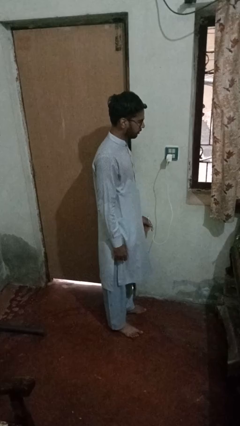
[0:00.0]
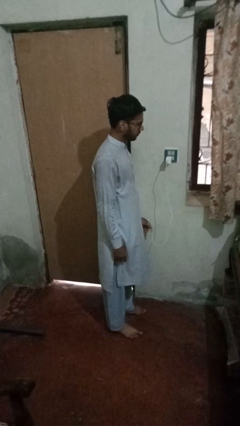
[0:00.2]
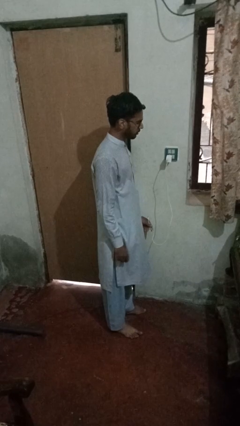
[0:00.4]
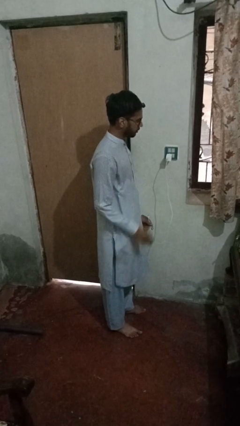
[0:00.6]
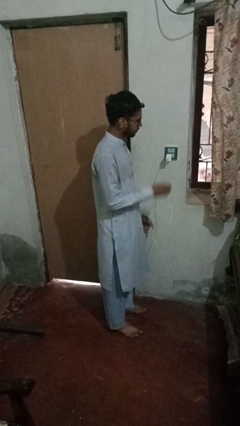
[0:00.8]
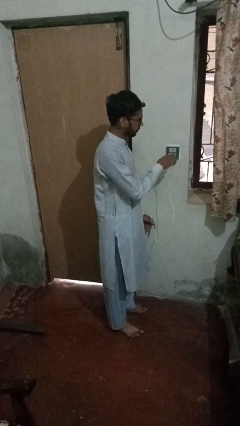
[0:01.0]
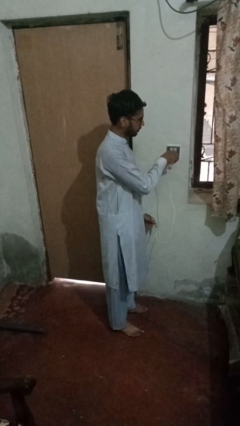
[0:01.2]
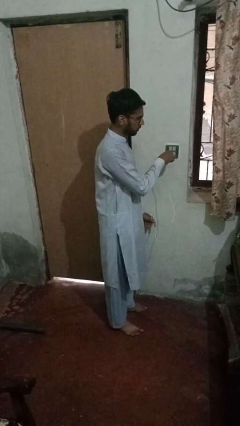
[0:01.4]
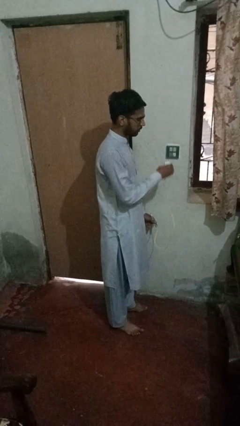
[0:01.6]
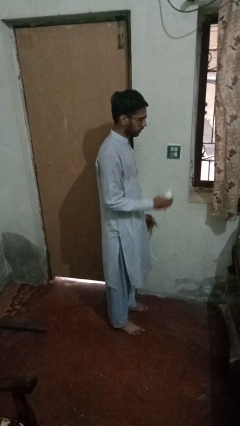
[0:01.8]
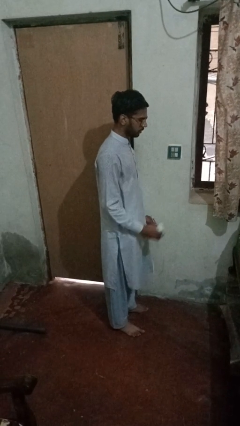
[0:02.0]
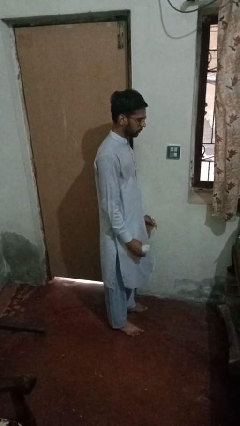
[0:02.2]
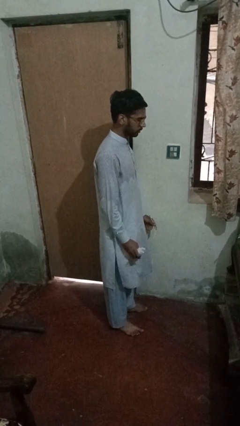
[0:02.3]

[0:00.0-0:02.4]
person unplugs from electrical socket

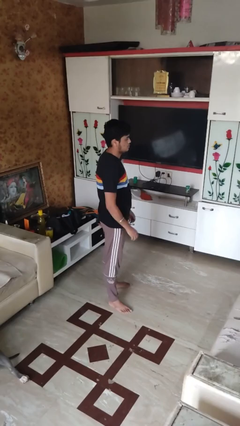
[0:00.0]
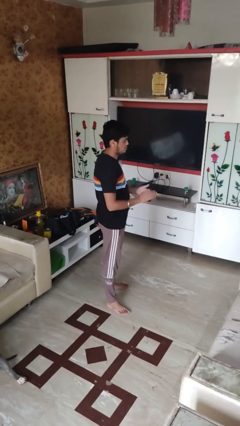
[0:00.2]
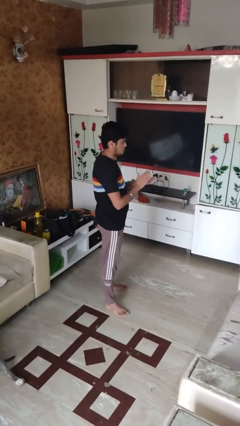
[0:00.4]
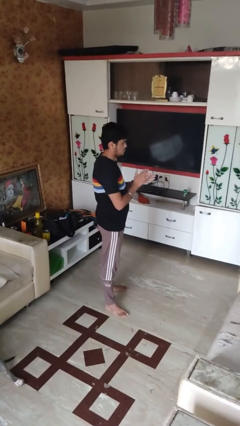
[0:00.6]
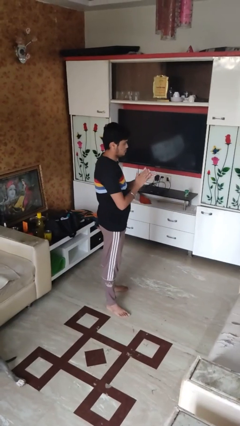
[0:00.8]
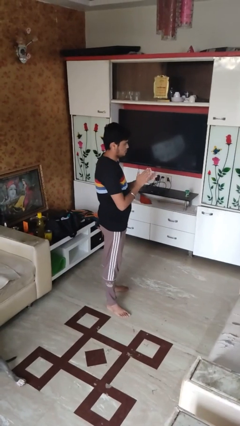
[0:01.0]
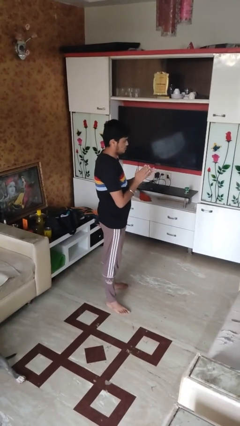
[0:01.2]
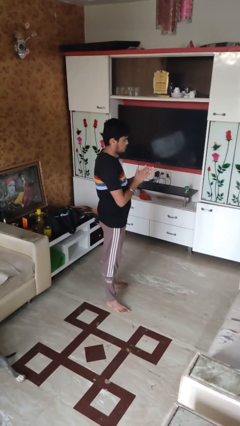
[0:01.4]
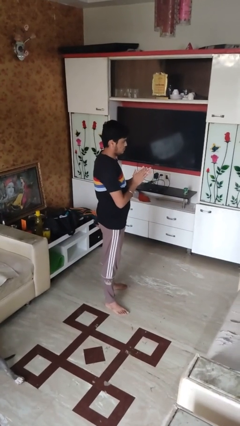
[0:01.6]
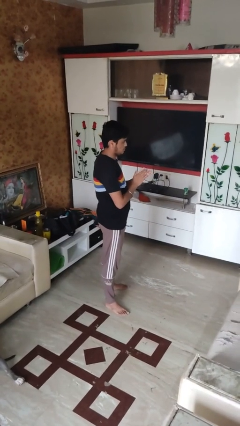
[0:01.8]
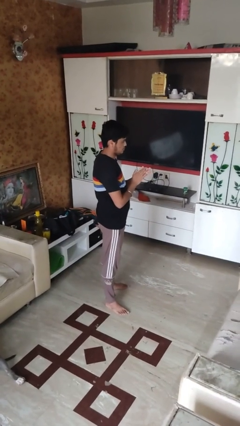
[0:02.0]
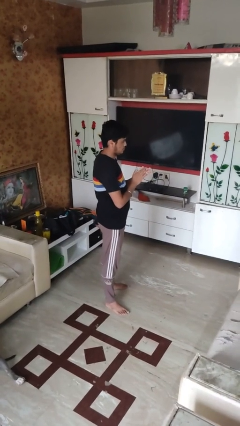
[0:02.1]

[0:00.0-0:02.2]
person claps hands

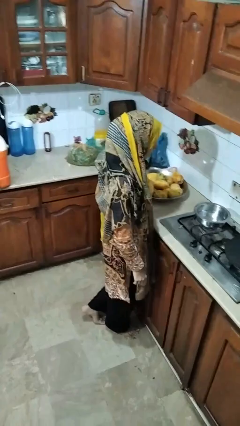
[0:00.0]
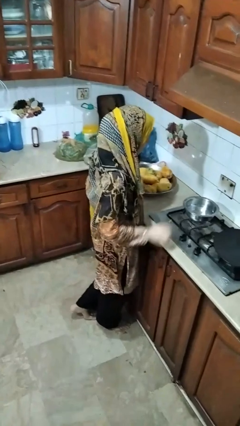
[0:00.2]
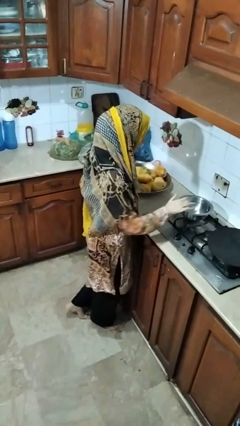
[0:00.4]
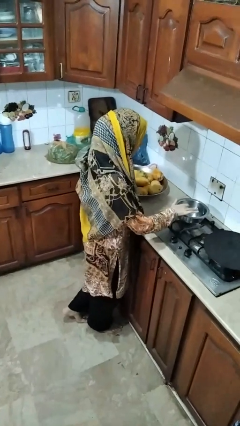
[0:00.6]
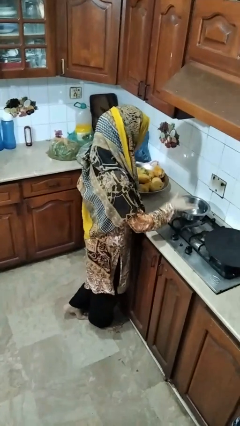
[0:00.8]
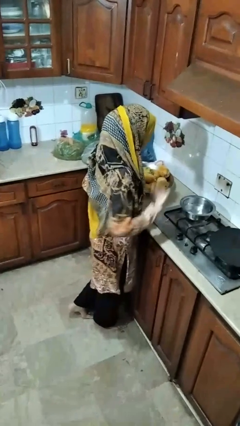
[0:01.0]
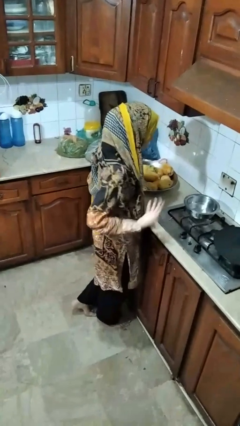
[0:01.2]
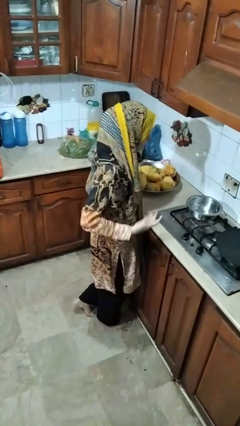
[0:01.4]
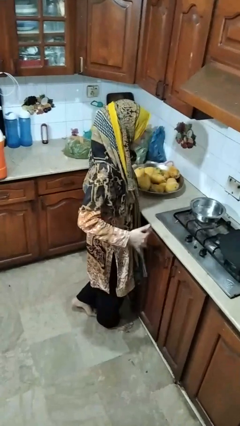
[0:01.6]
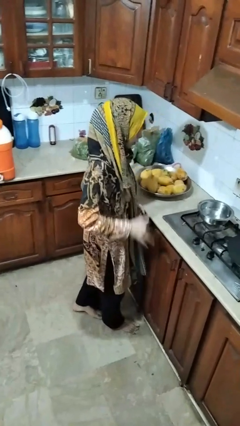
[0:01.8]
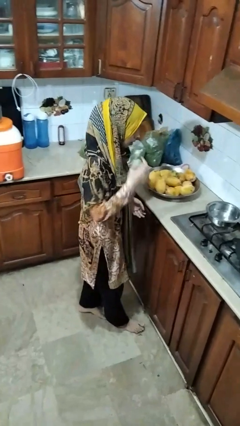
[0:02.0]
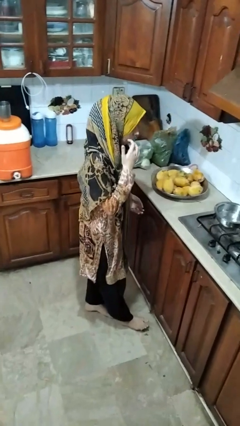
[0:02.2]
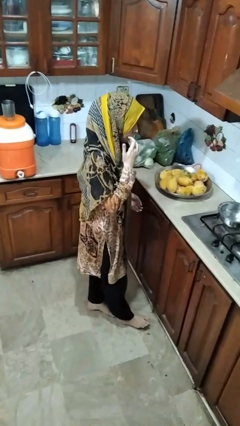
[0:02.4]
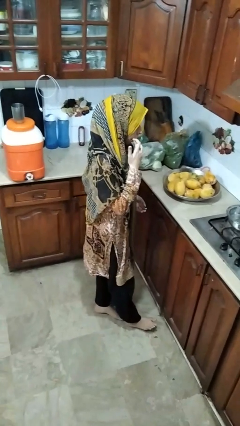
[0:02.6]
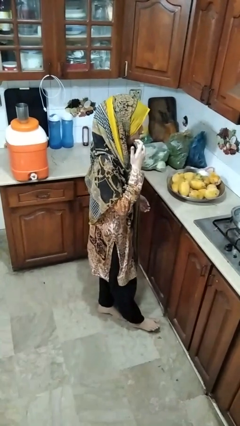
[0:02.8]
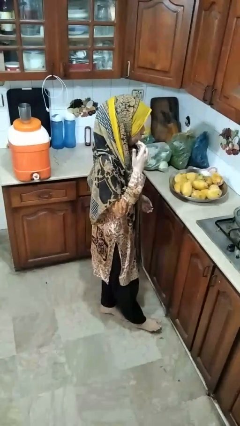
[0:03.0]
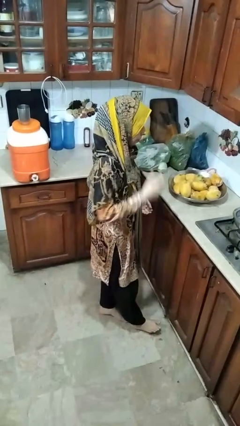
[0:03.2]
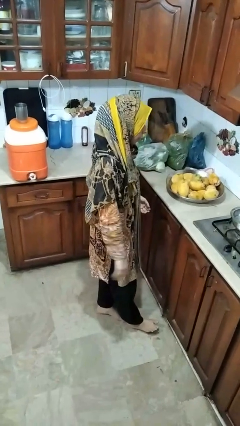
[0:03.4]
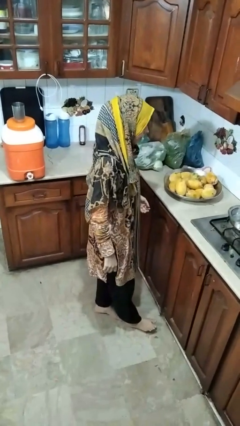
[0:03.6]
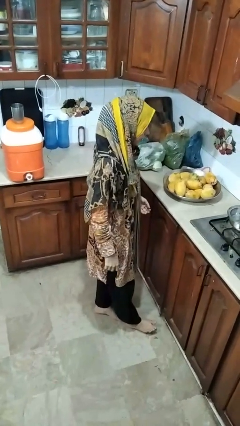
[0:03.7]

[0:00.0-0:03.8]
person burns hand

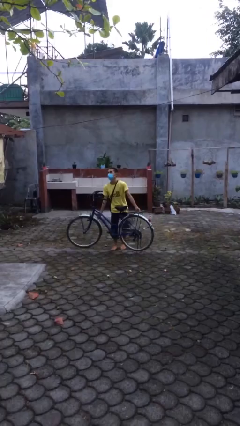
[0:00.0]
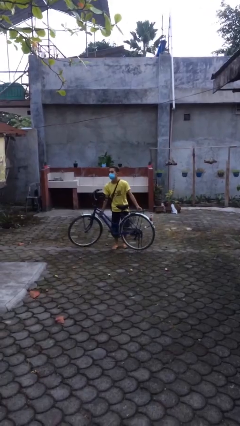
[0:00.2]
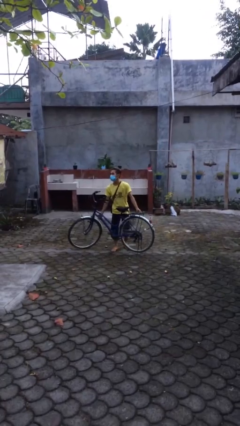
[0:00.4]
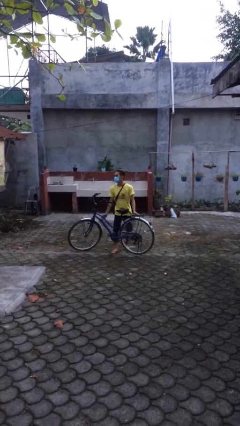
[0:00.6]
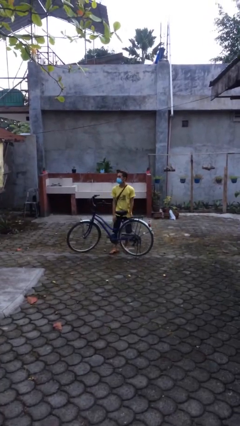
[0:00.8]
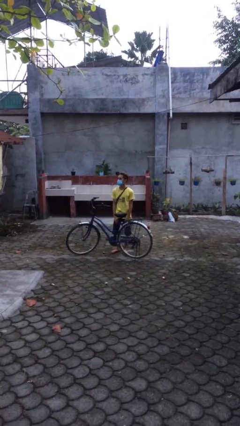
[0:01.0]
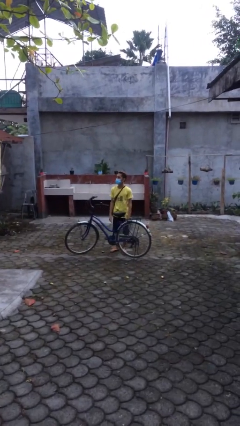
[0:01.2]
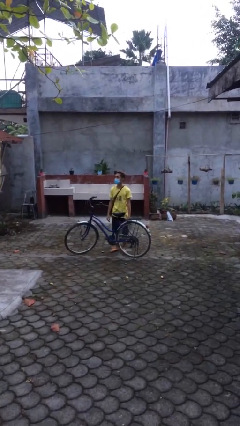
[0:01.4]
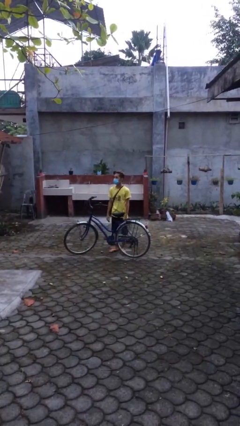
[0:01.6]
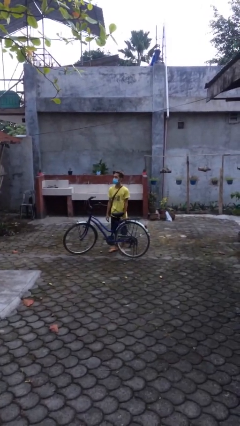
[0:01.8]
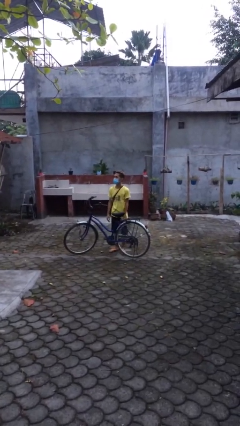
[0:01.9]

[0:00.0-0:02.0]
person puts down object on floor

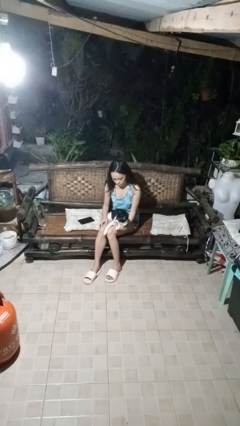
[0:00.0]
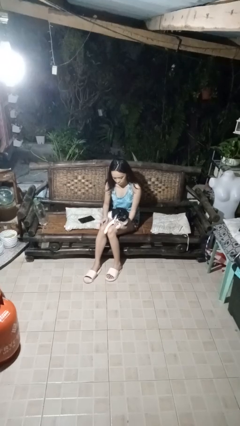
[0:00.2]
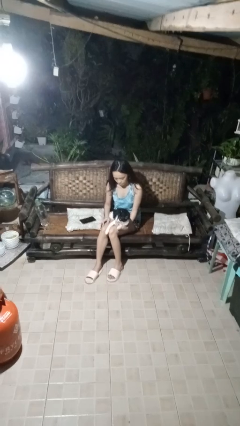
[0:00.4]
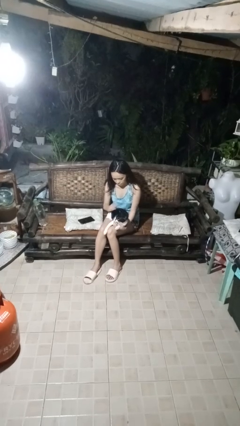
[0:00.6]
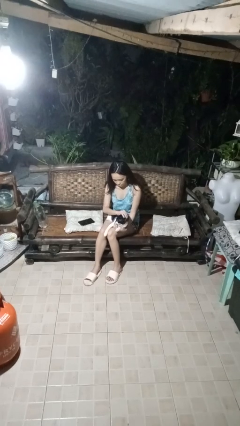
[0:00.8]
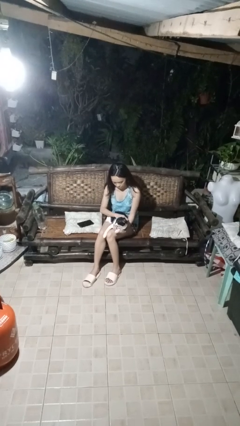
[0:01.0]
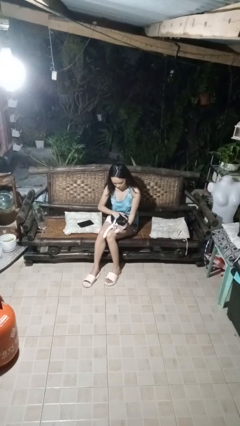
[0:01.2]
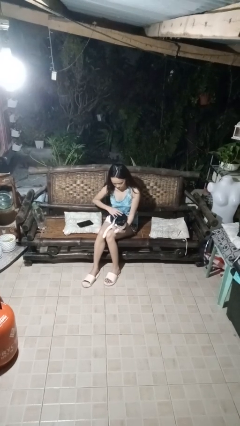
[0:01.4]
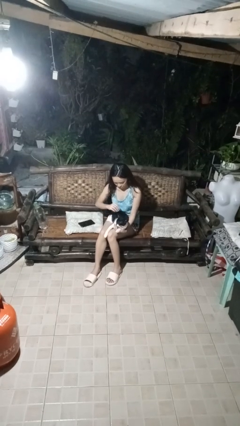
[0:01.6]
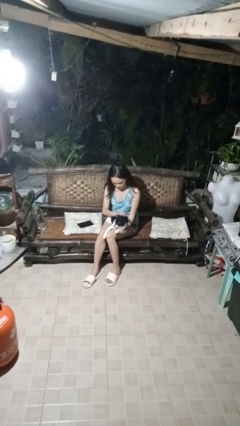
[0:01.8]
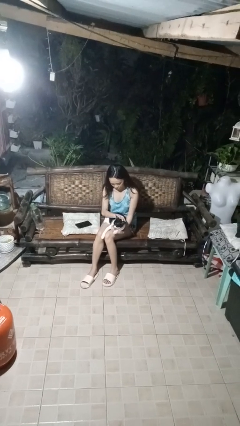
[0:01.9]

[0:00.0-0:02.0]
person pets cat

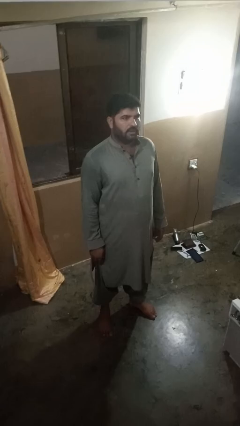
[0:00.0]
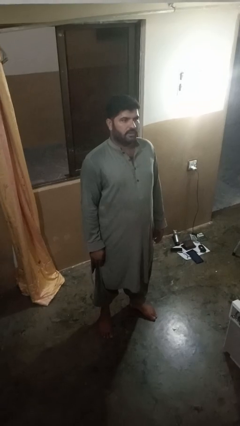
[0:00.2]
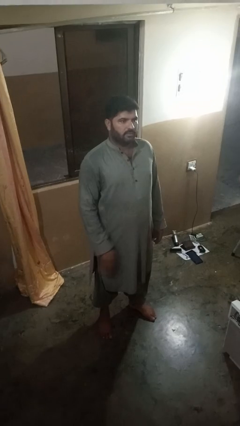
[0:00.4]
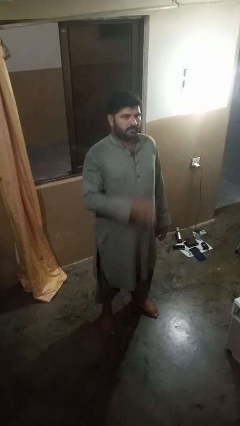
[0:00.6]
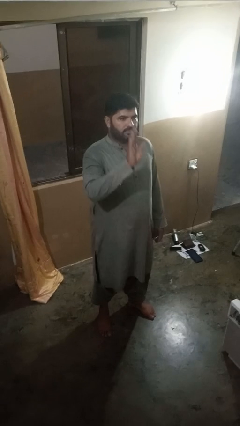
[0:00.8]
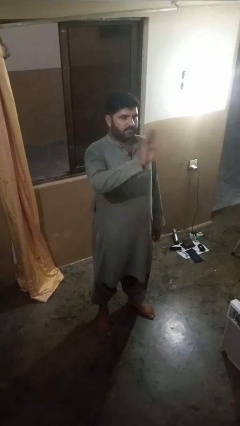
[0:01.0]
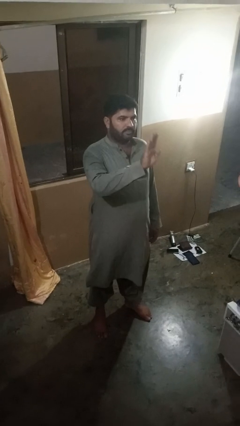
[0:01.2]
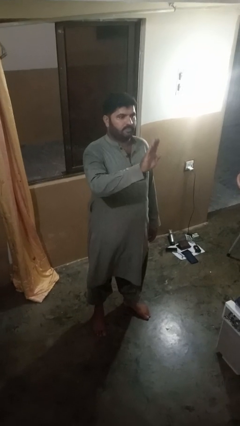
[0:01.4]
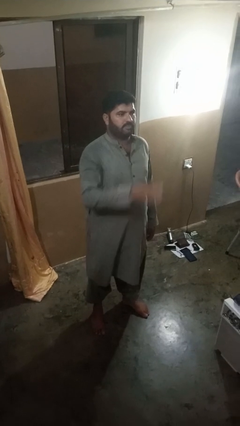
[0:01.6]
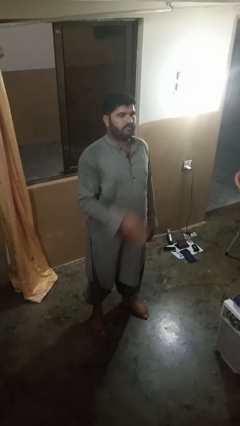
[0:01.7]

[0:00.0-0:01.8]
person gestures stop

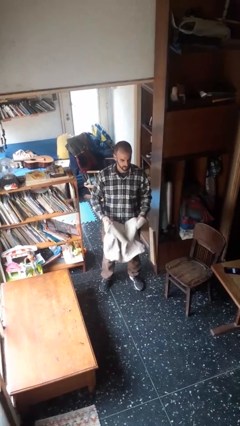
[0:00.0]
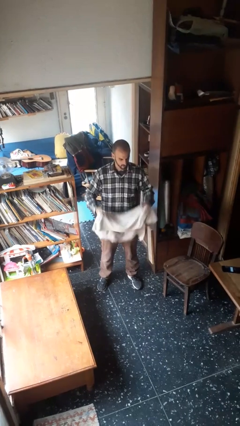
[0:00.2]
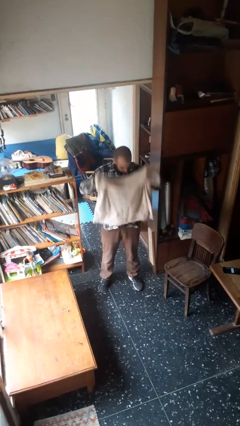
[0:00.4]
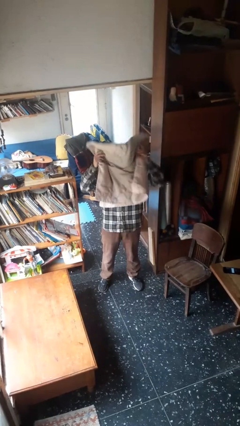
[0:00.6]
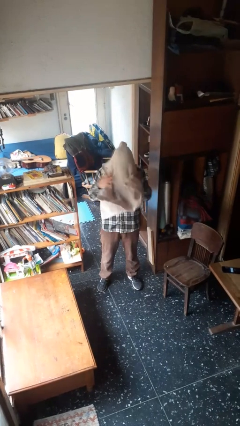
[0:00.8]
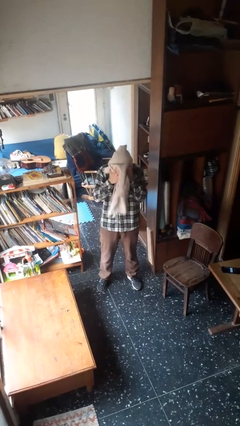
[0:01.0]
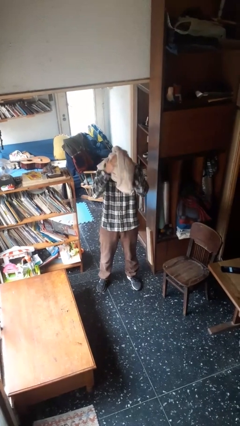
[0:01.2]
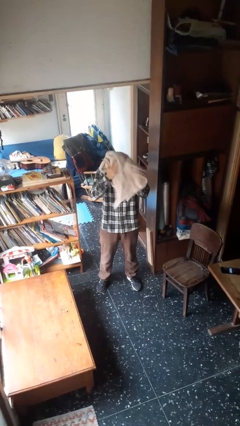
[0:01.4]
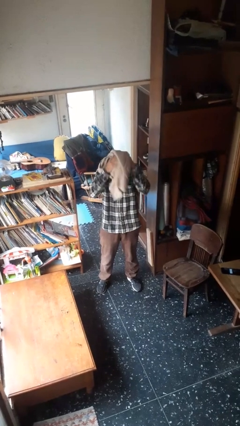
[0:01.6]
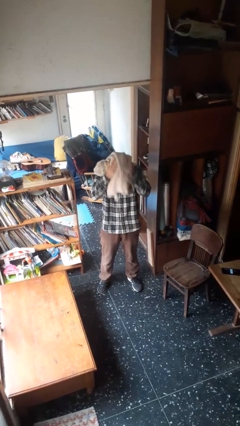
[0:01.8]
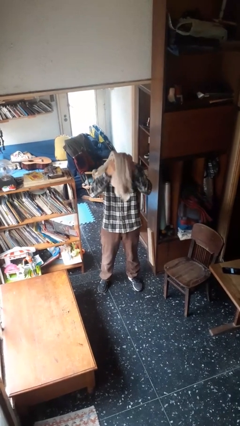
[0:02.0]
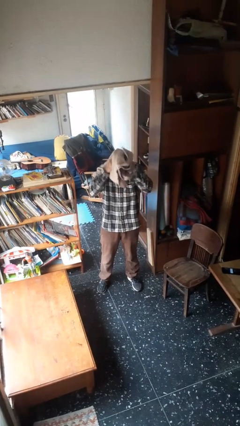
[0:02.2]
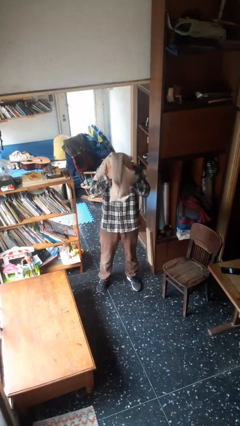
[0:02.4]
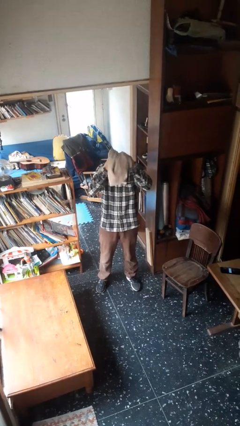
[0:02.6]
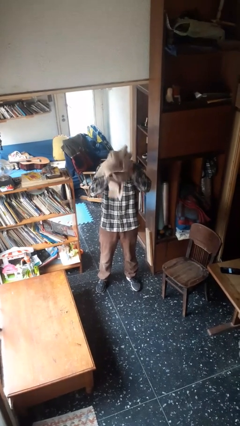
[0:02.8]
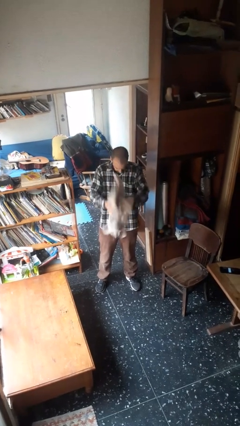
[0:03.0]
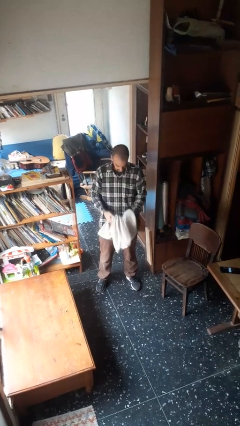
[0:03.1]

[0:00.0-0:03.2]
person dries hair with towel
